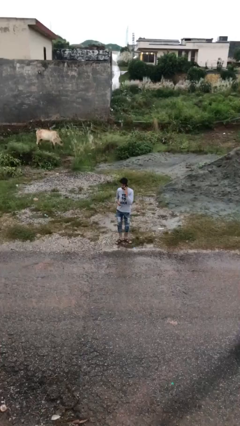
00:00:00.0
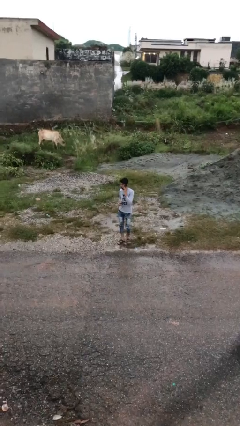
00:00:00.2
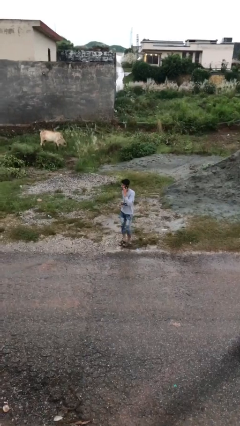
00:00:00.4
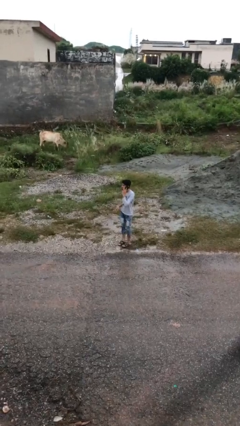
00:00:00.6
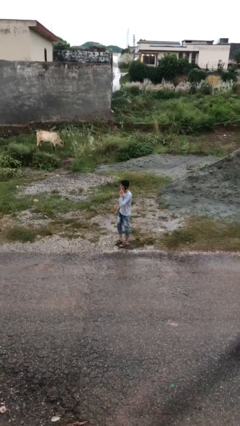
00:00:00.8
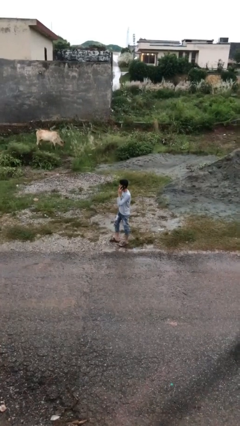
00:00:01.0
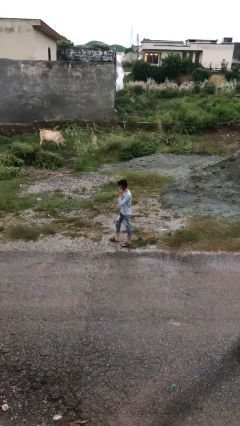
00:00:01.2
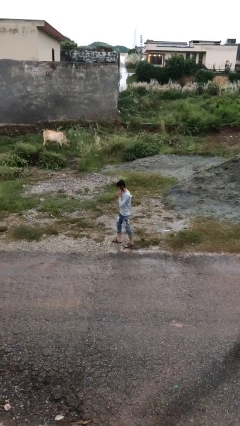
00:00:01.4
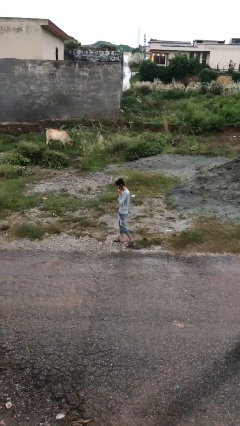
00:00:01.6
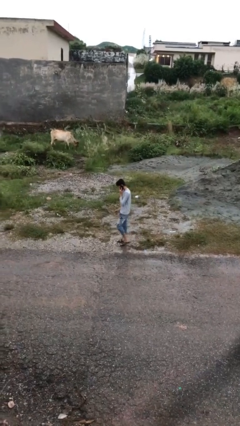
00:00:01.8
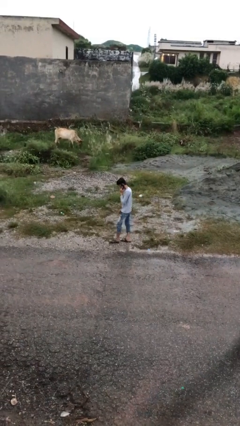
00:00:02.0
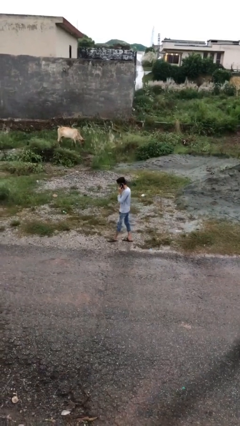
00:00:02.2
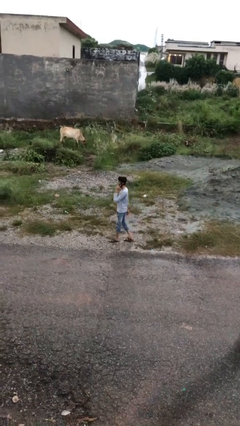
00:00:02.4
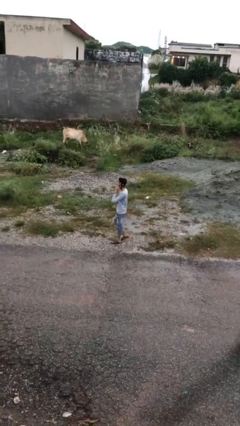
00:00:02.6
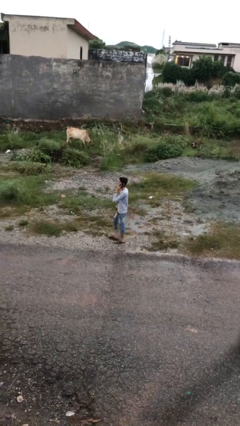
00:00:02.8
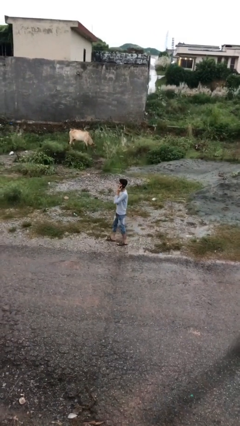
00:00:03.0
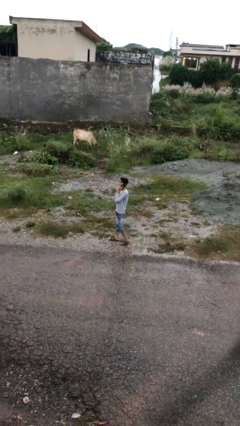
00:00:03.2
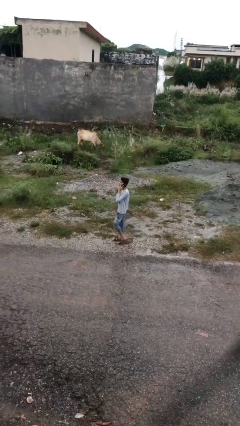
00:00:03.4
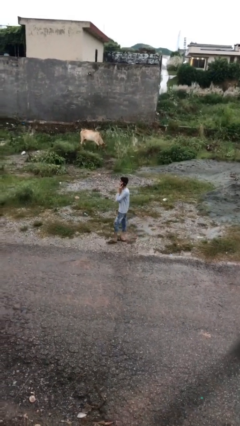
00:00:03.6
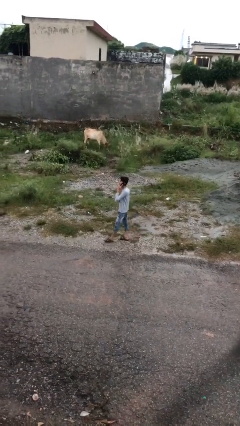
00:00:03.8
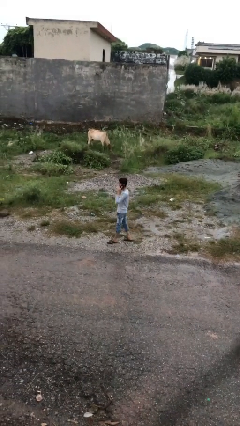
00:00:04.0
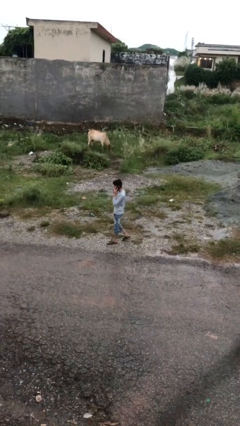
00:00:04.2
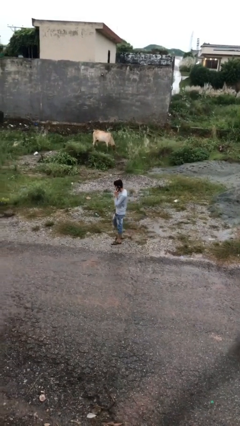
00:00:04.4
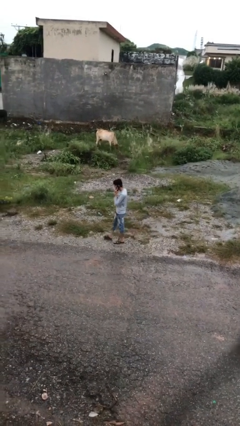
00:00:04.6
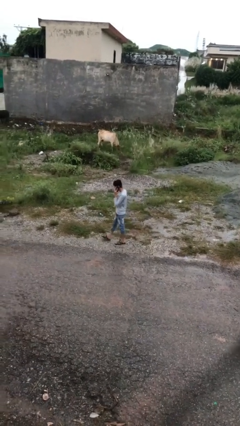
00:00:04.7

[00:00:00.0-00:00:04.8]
person talks on phone

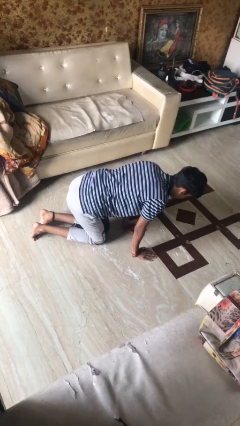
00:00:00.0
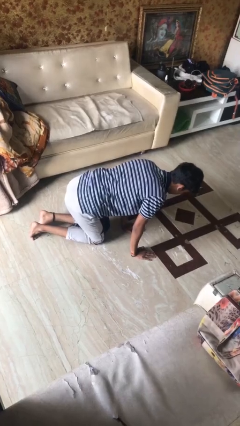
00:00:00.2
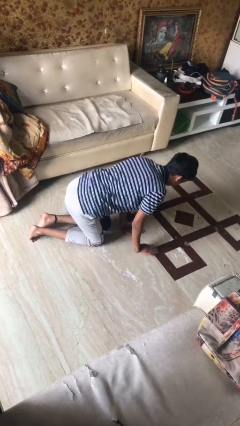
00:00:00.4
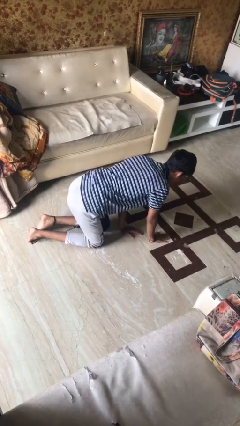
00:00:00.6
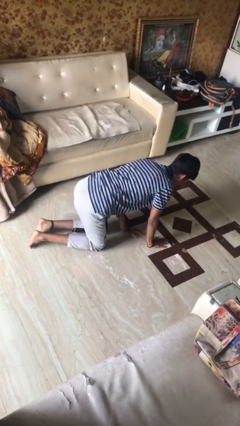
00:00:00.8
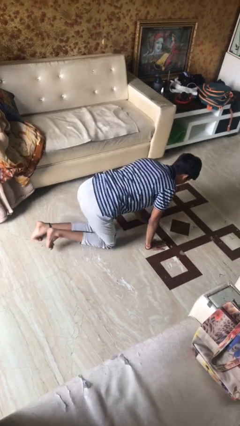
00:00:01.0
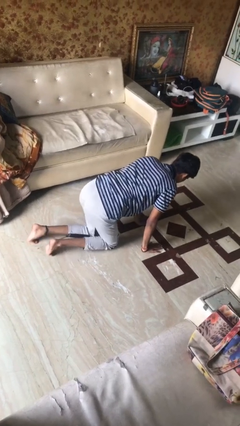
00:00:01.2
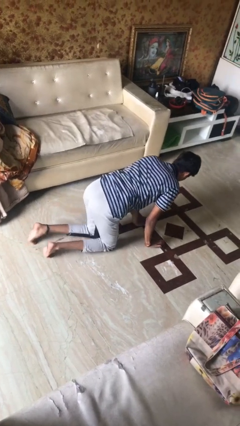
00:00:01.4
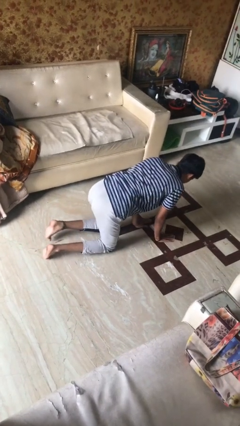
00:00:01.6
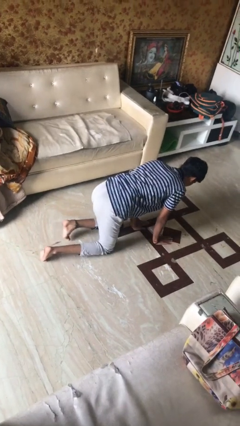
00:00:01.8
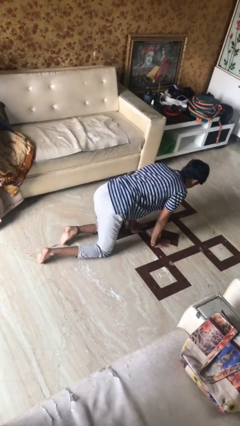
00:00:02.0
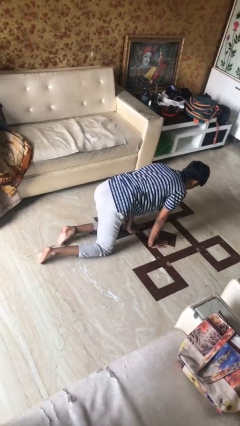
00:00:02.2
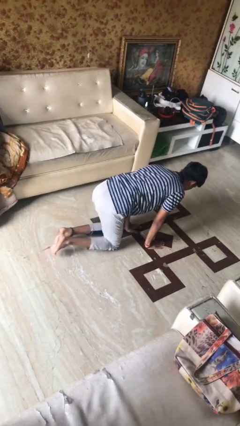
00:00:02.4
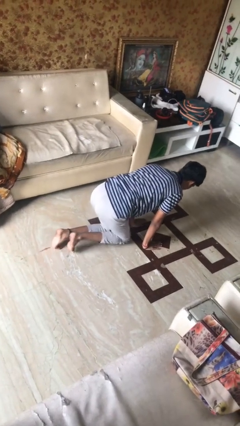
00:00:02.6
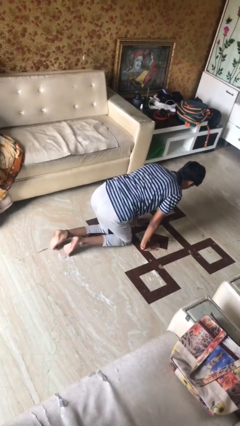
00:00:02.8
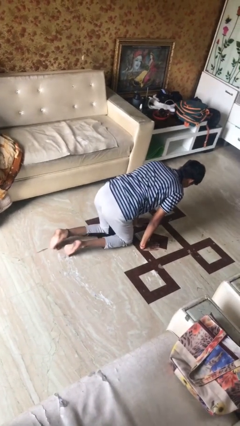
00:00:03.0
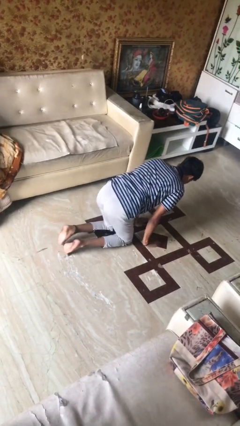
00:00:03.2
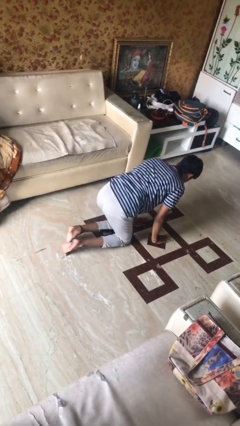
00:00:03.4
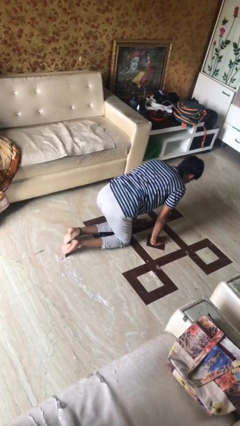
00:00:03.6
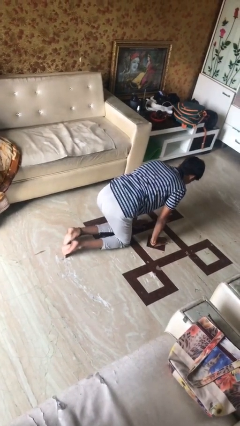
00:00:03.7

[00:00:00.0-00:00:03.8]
person crawls

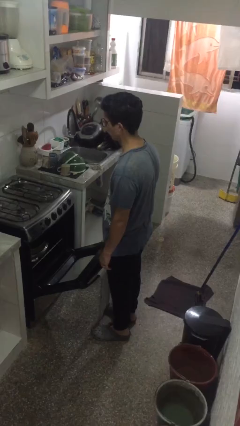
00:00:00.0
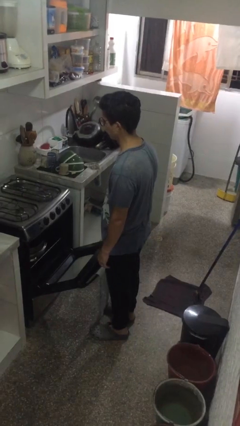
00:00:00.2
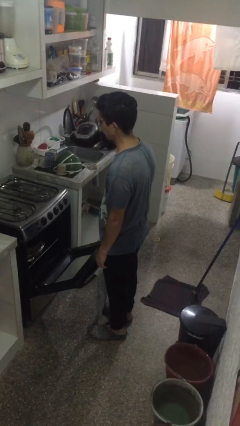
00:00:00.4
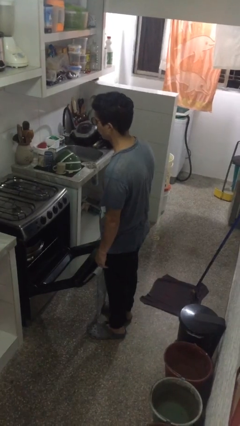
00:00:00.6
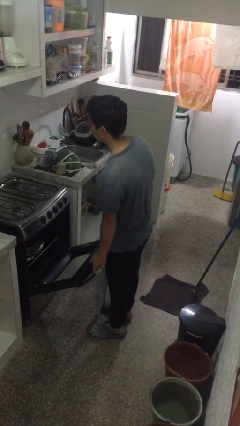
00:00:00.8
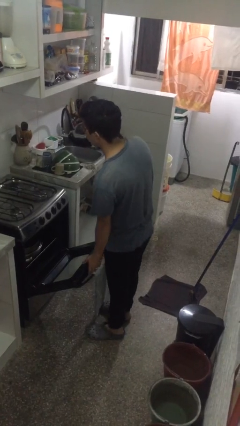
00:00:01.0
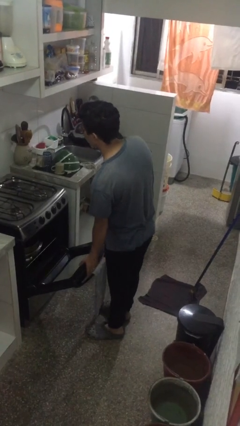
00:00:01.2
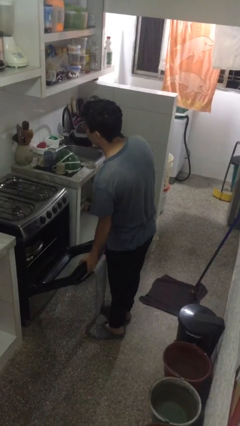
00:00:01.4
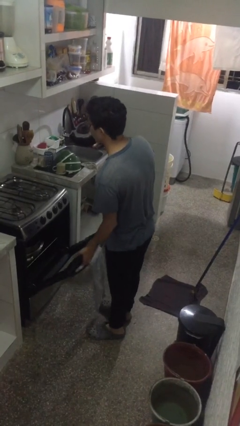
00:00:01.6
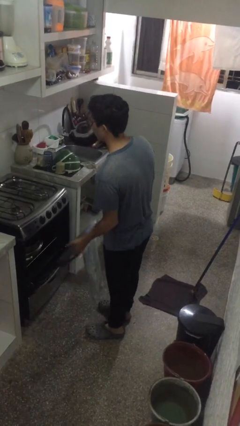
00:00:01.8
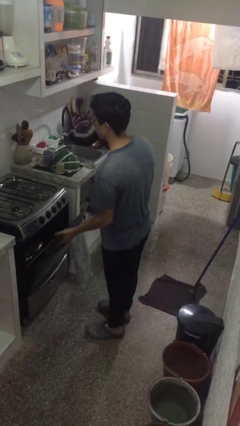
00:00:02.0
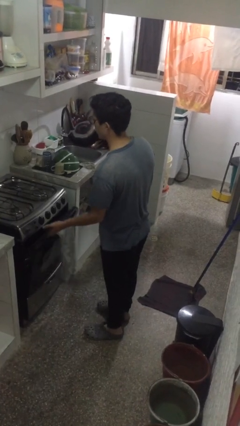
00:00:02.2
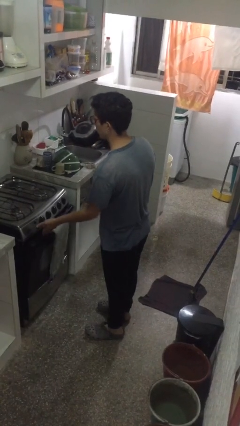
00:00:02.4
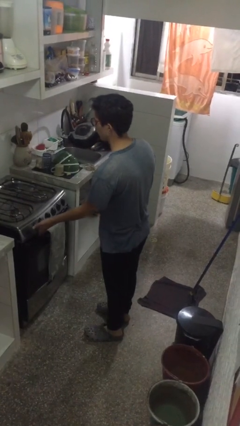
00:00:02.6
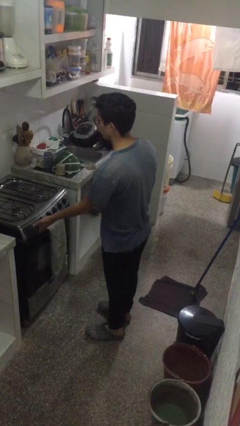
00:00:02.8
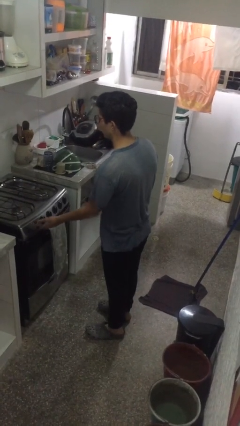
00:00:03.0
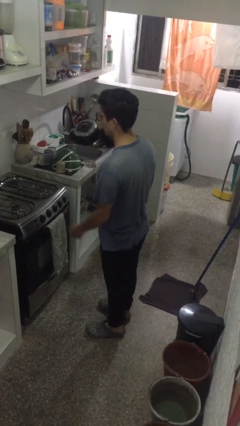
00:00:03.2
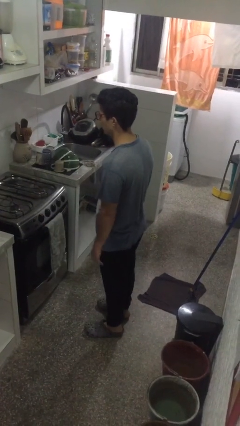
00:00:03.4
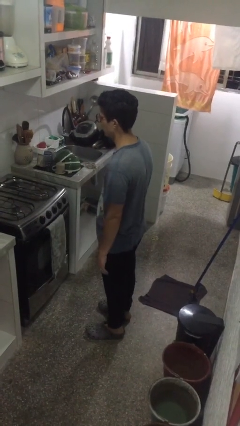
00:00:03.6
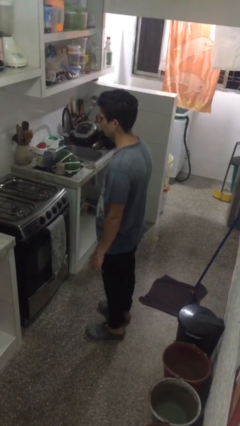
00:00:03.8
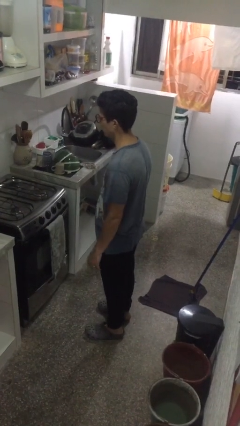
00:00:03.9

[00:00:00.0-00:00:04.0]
person closes oven door

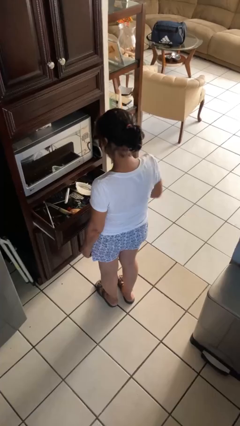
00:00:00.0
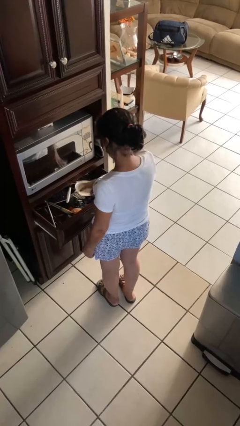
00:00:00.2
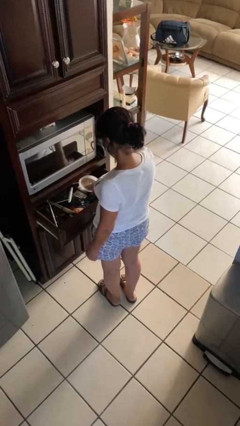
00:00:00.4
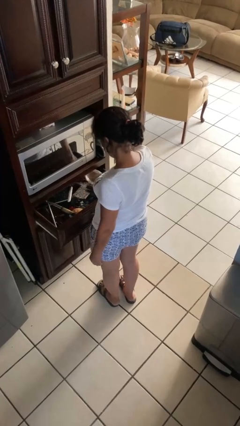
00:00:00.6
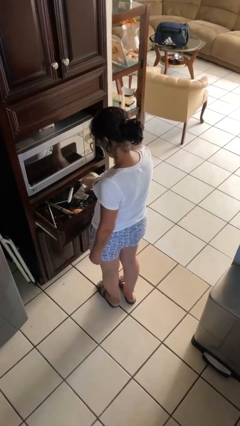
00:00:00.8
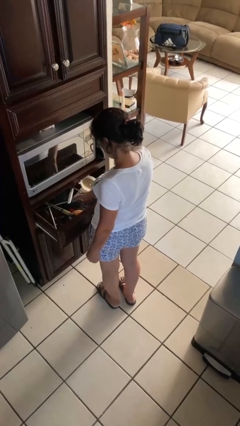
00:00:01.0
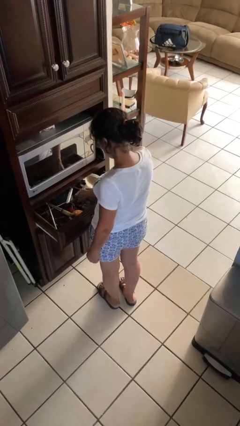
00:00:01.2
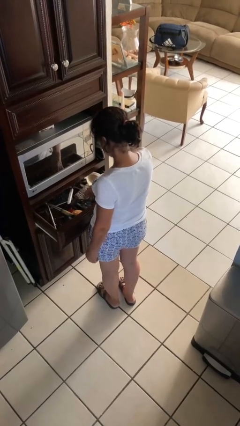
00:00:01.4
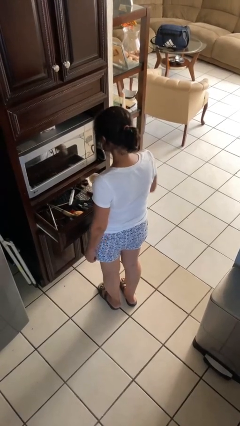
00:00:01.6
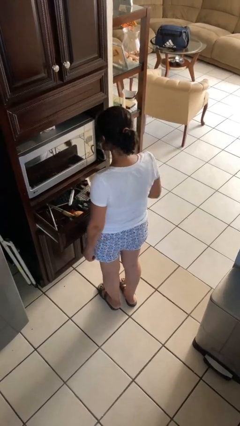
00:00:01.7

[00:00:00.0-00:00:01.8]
person searches in kitchen drawer

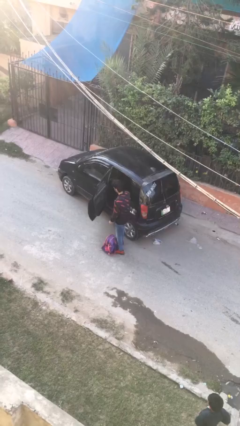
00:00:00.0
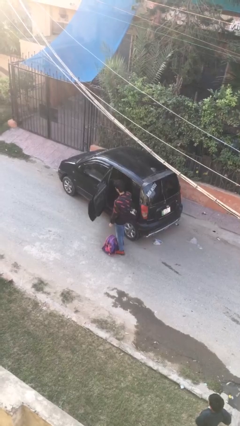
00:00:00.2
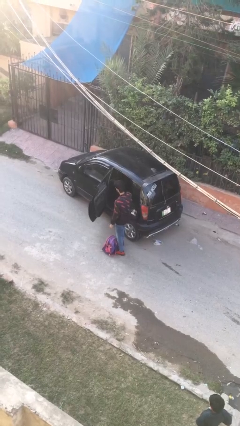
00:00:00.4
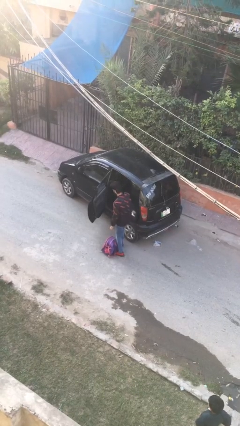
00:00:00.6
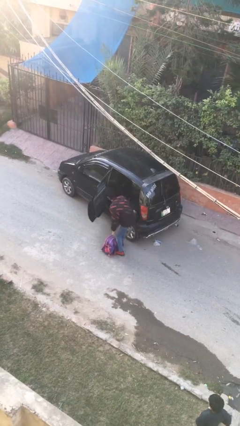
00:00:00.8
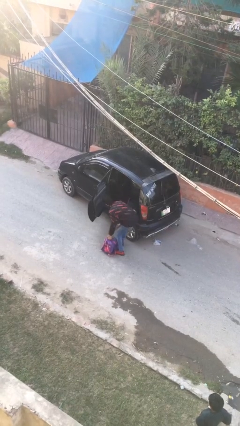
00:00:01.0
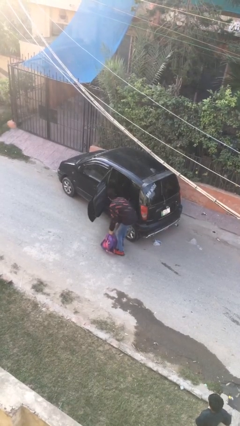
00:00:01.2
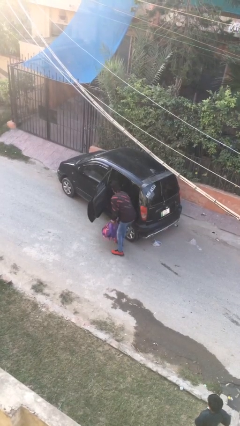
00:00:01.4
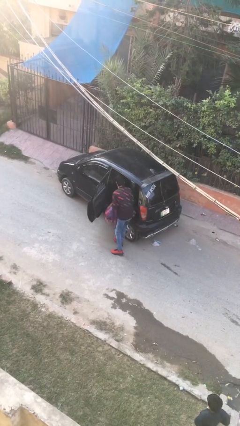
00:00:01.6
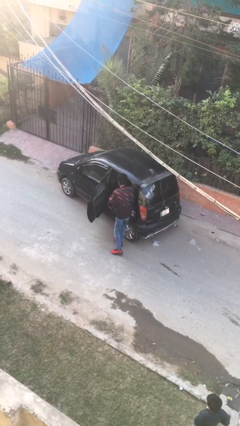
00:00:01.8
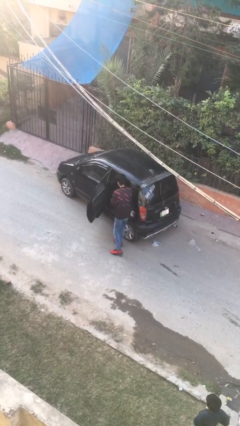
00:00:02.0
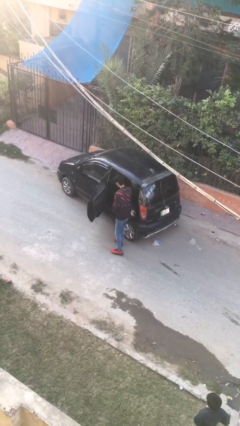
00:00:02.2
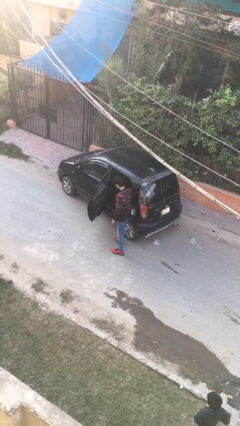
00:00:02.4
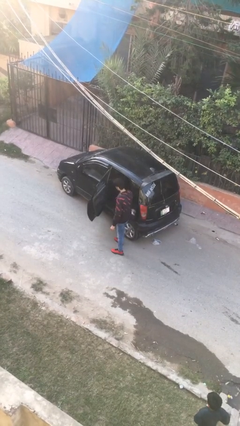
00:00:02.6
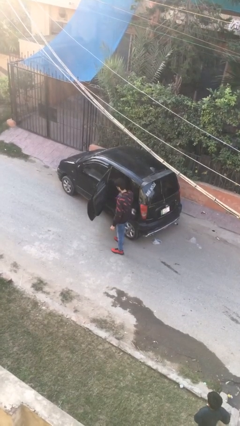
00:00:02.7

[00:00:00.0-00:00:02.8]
person loads car

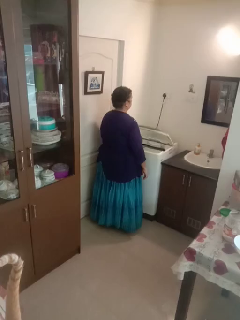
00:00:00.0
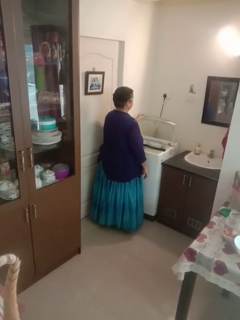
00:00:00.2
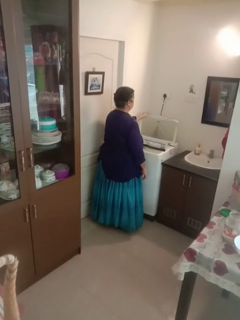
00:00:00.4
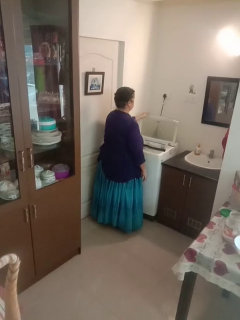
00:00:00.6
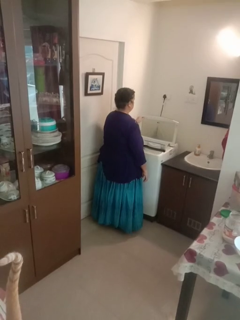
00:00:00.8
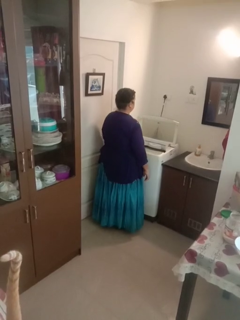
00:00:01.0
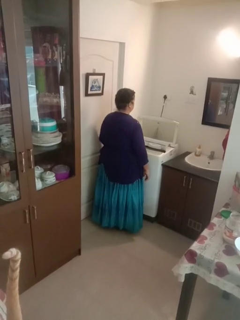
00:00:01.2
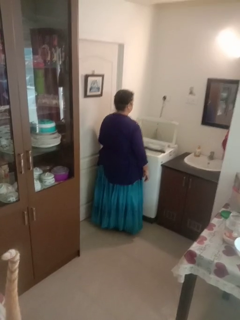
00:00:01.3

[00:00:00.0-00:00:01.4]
person opens clothes washer
